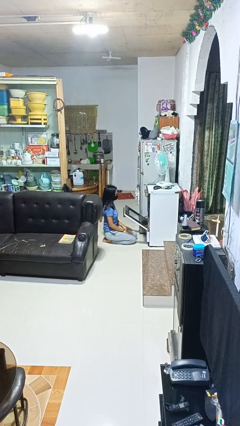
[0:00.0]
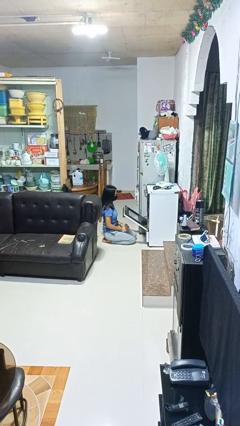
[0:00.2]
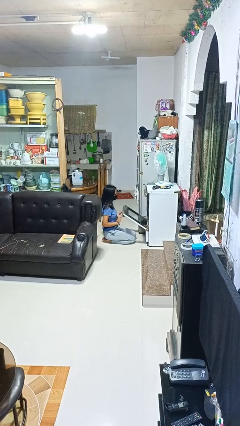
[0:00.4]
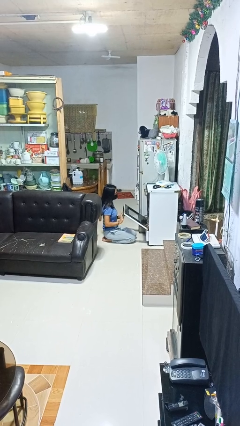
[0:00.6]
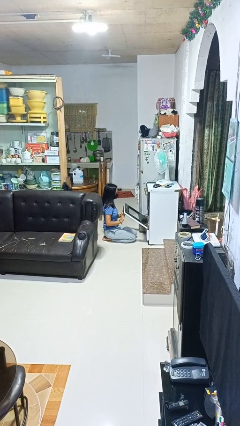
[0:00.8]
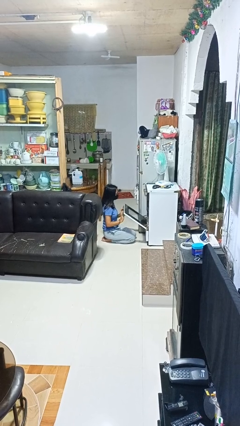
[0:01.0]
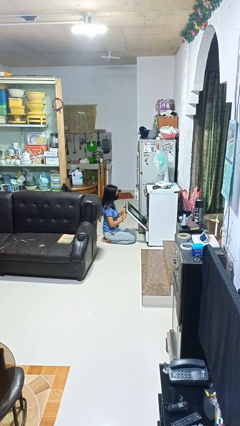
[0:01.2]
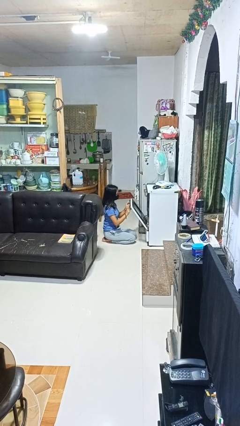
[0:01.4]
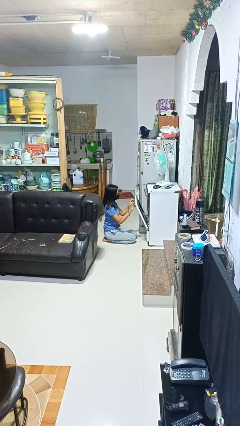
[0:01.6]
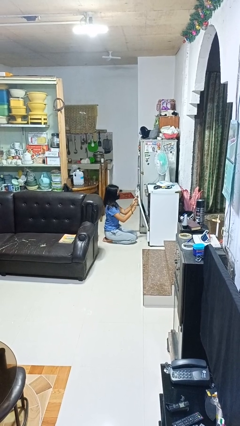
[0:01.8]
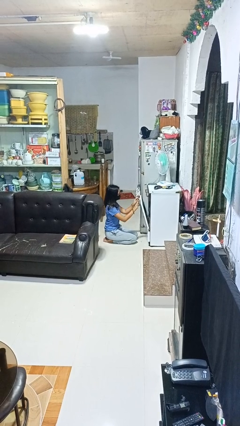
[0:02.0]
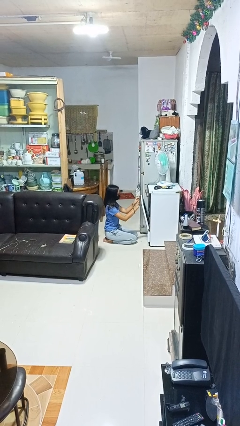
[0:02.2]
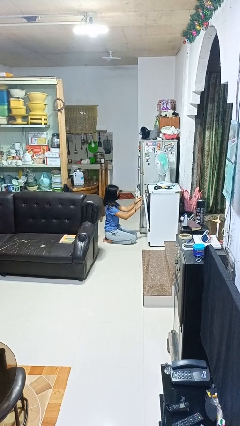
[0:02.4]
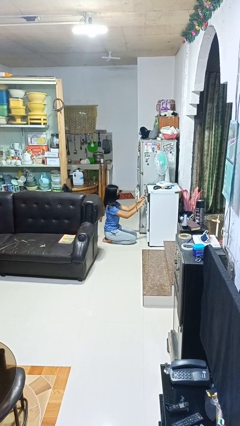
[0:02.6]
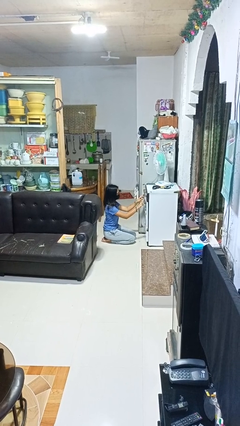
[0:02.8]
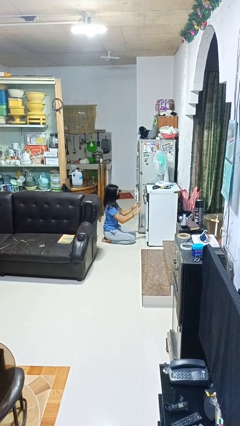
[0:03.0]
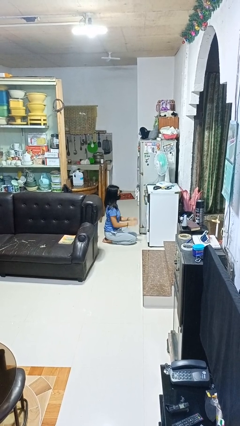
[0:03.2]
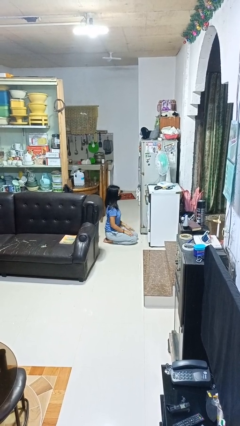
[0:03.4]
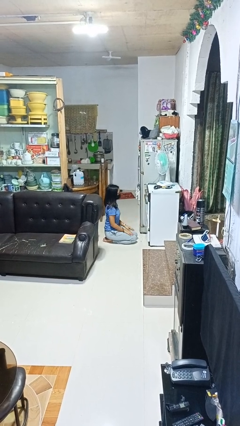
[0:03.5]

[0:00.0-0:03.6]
person closes oven door

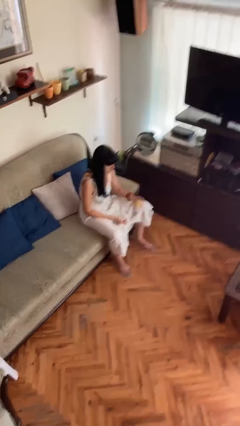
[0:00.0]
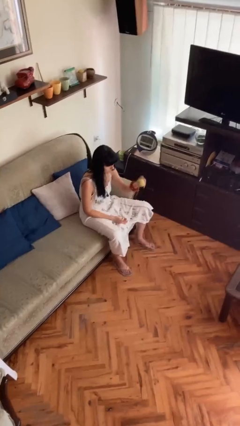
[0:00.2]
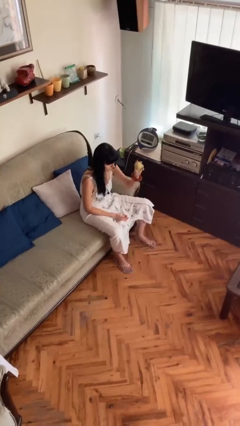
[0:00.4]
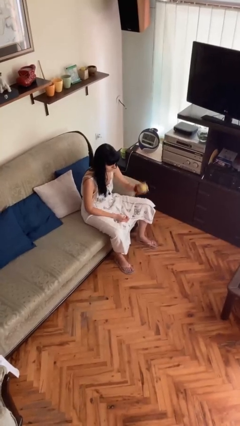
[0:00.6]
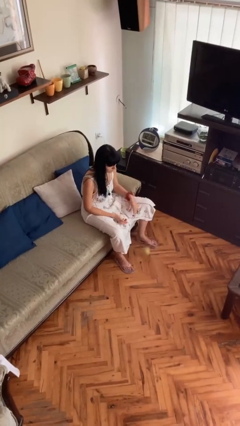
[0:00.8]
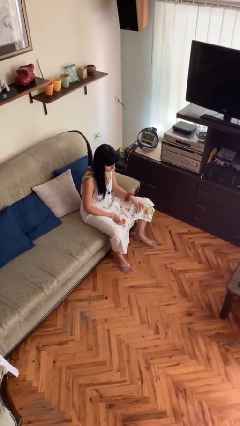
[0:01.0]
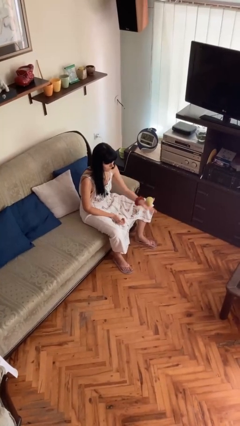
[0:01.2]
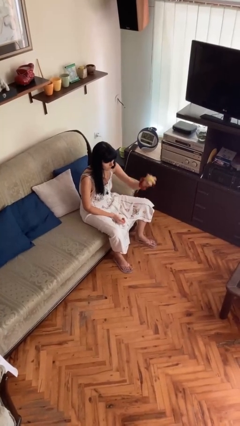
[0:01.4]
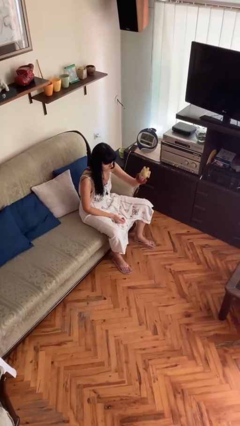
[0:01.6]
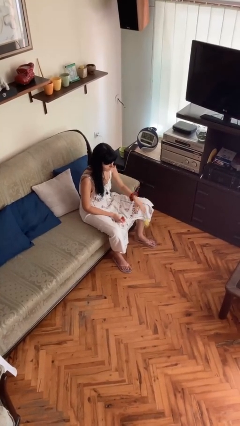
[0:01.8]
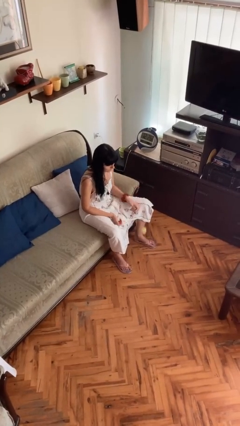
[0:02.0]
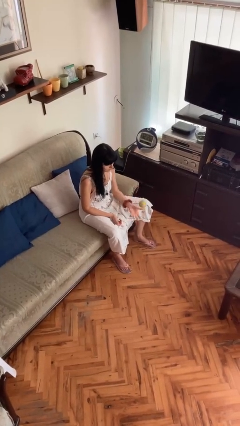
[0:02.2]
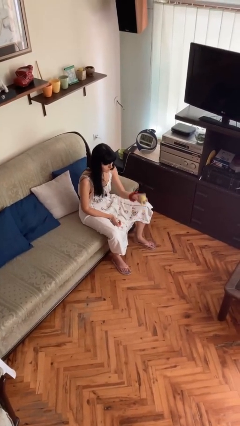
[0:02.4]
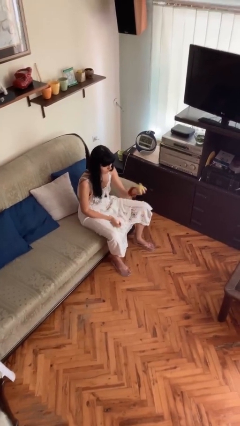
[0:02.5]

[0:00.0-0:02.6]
person bounces ball on floor

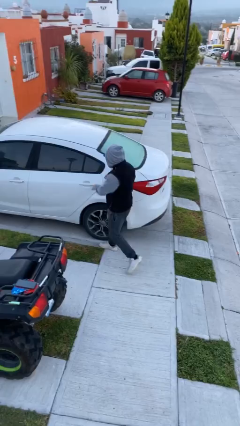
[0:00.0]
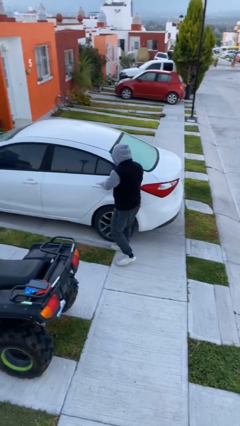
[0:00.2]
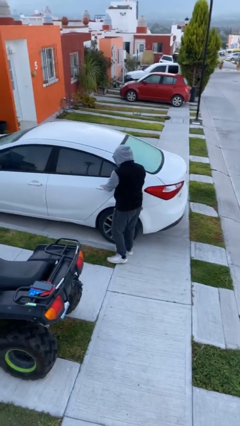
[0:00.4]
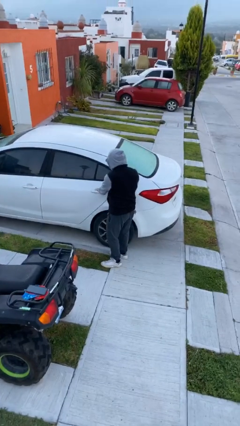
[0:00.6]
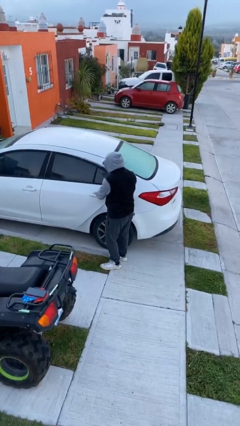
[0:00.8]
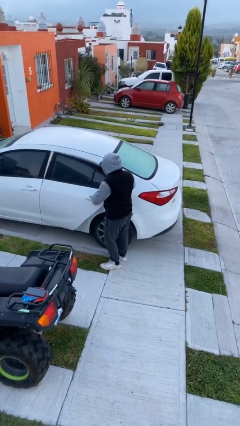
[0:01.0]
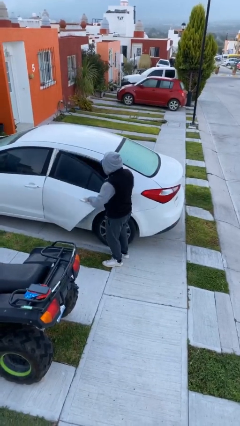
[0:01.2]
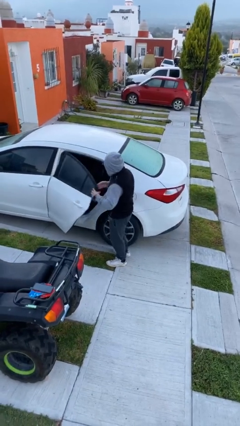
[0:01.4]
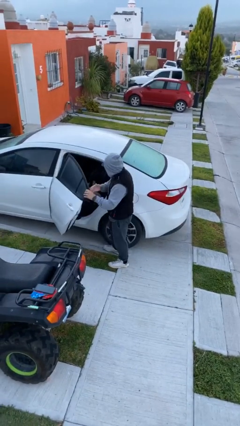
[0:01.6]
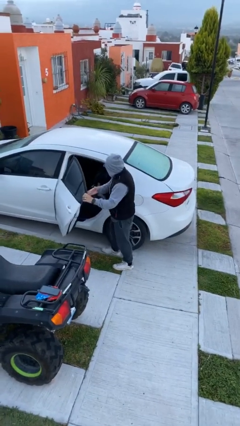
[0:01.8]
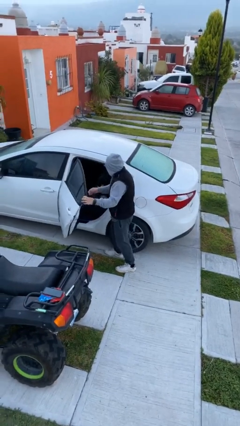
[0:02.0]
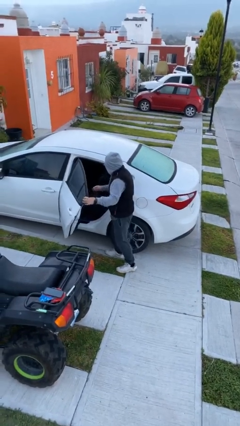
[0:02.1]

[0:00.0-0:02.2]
person opens car door

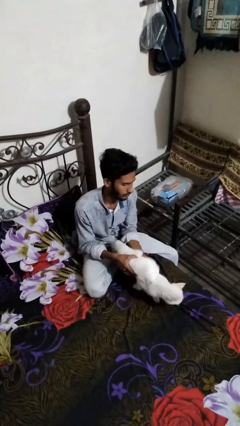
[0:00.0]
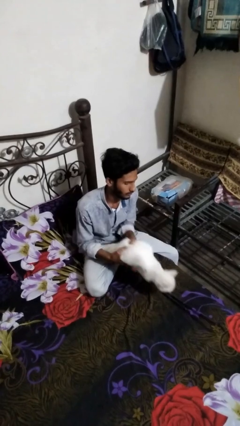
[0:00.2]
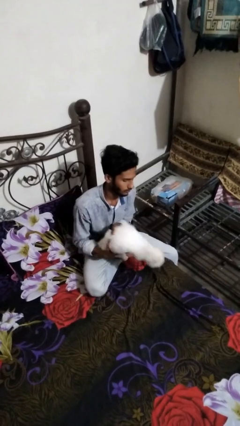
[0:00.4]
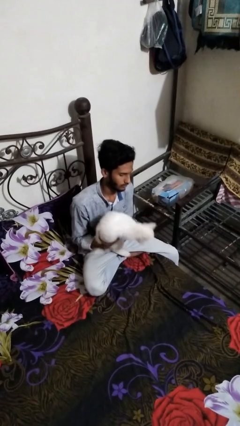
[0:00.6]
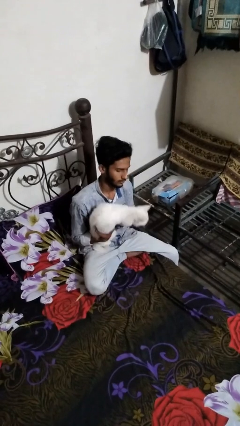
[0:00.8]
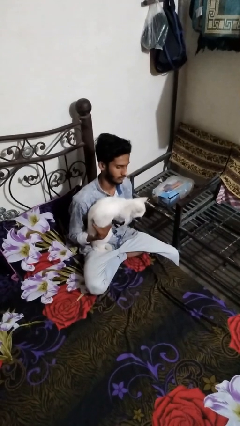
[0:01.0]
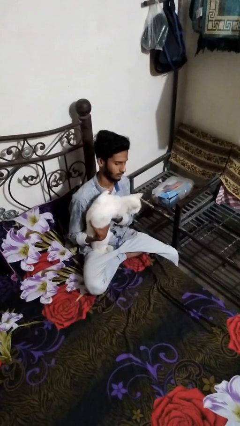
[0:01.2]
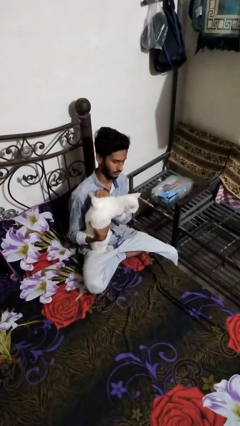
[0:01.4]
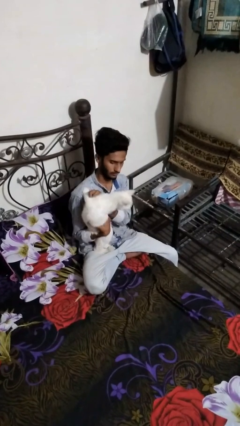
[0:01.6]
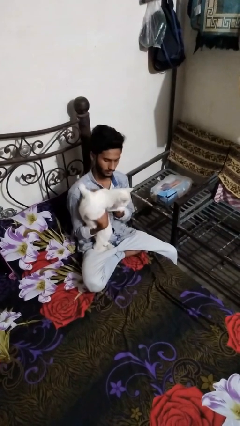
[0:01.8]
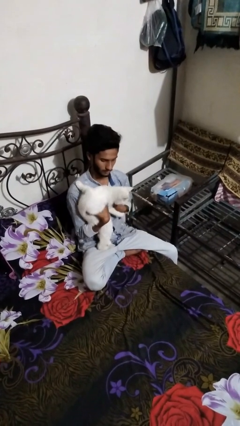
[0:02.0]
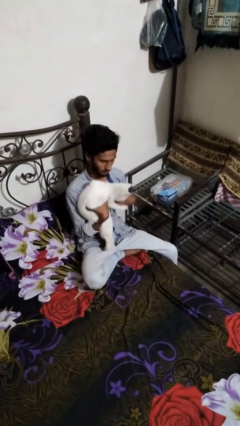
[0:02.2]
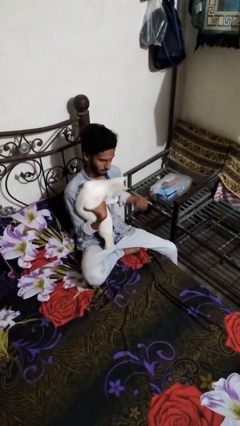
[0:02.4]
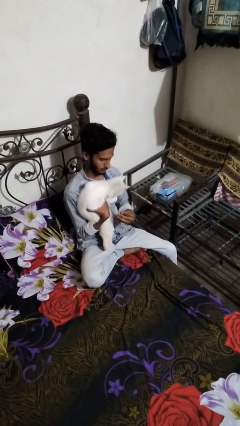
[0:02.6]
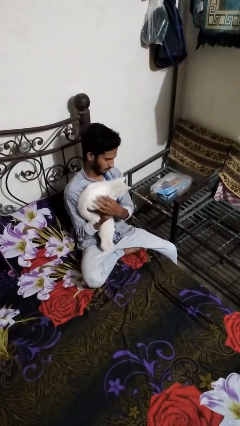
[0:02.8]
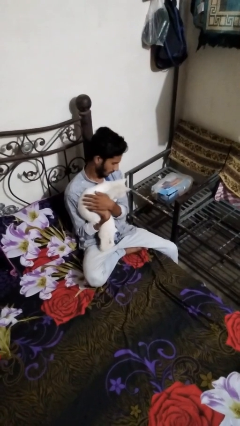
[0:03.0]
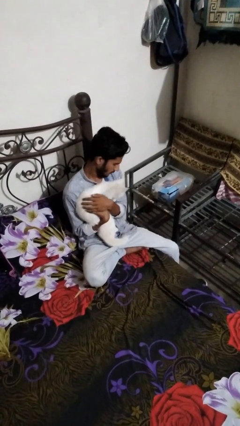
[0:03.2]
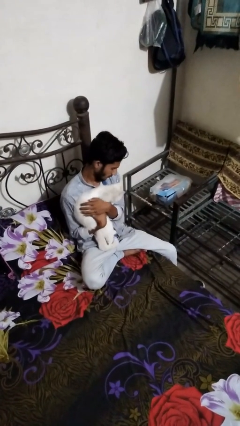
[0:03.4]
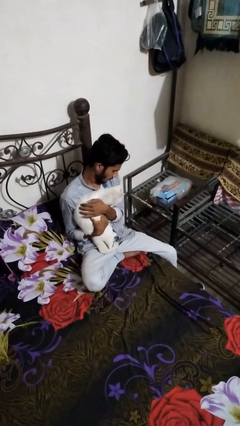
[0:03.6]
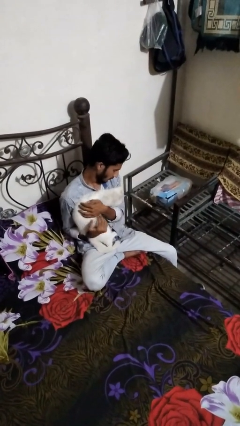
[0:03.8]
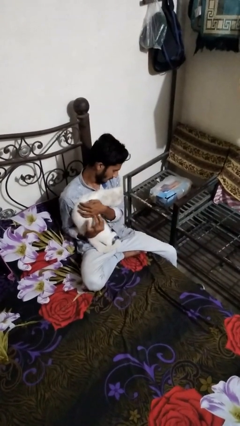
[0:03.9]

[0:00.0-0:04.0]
person hugs cat

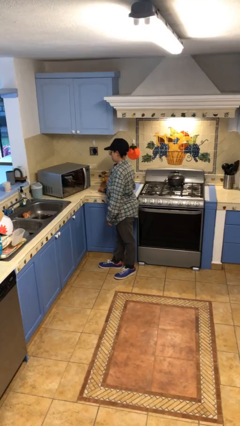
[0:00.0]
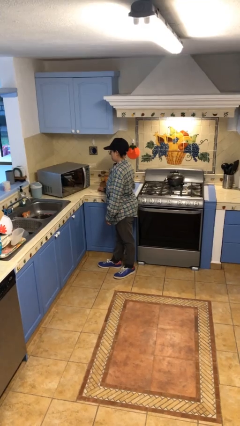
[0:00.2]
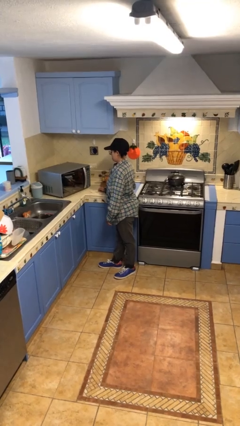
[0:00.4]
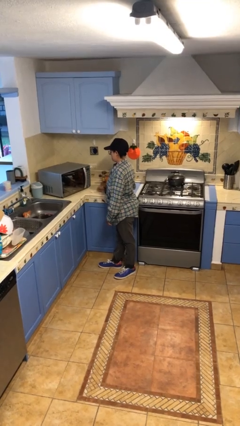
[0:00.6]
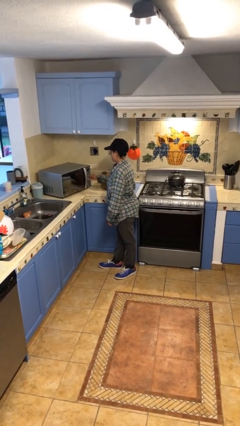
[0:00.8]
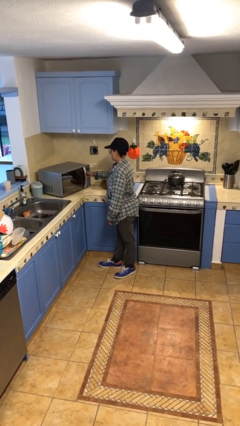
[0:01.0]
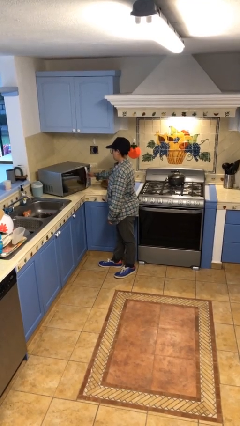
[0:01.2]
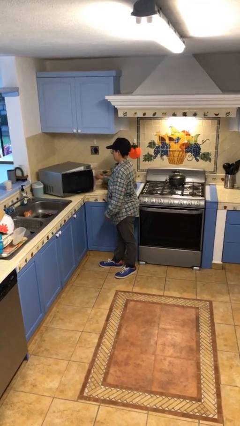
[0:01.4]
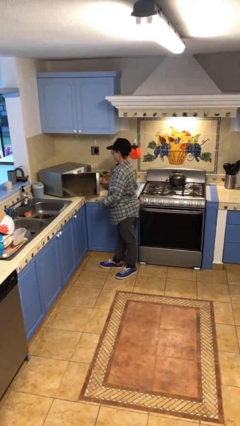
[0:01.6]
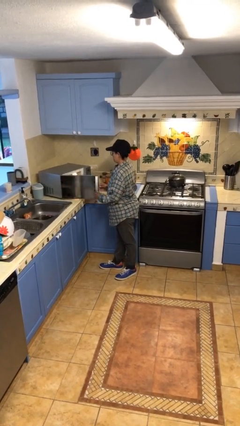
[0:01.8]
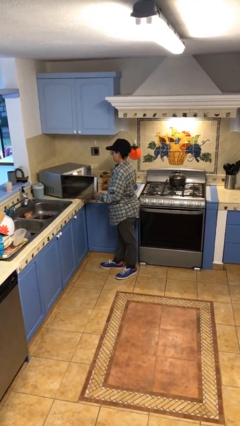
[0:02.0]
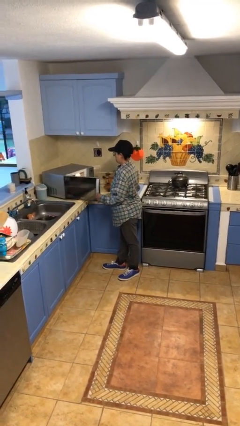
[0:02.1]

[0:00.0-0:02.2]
person opens microwave

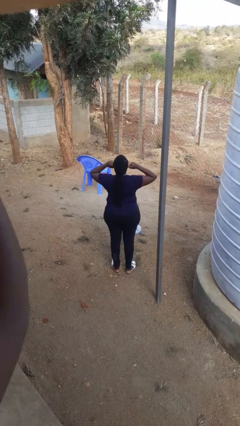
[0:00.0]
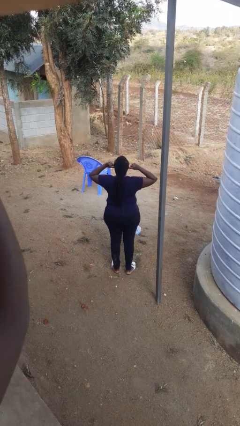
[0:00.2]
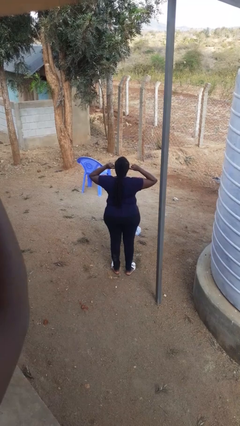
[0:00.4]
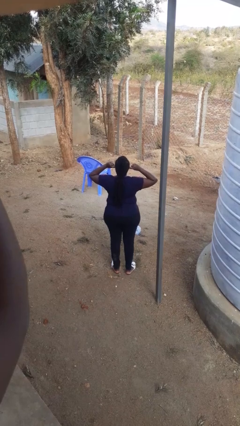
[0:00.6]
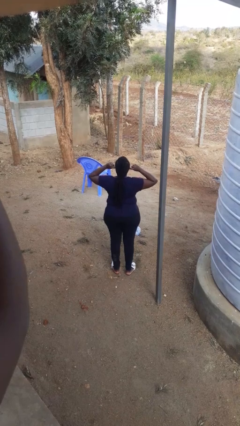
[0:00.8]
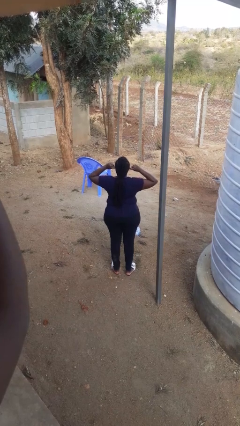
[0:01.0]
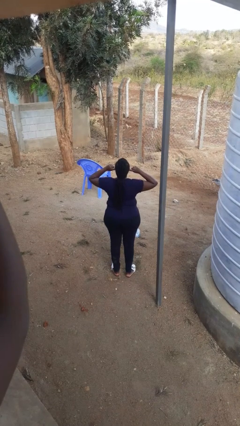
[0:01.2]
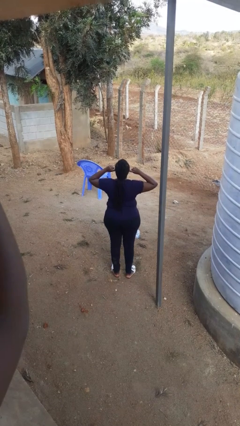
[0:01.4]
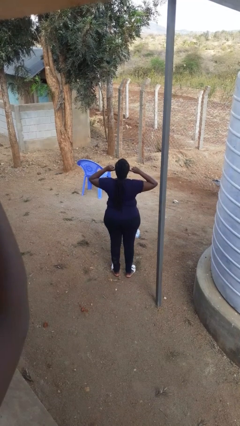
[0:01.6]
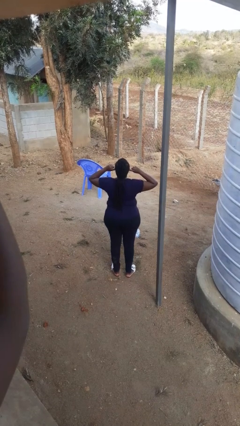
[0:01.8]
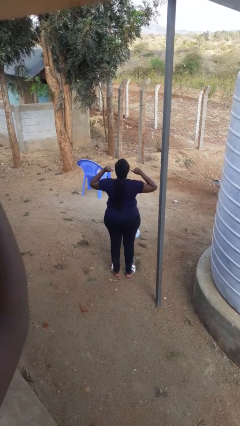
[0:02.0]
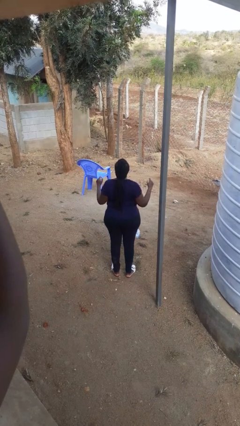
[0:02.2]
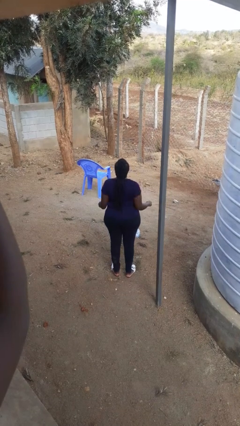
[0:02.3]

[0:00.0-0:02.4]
person puts fingers in ear

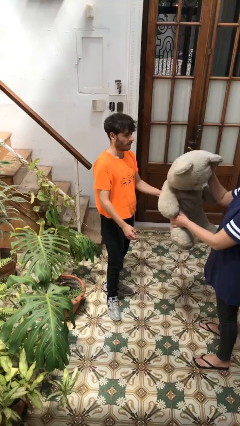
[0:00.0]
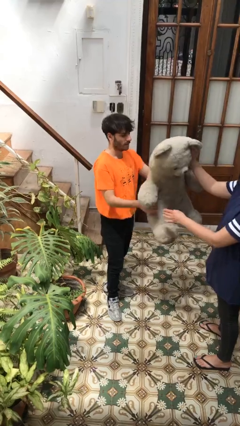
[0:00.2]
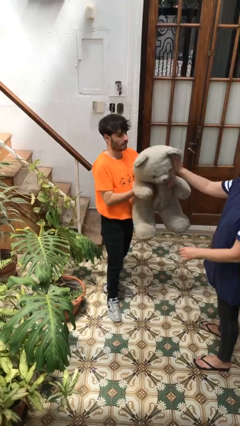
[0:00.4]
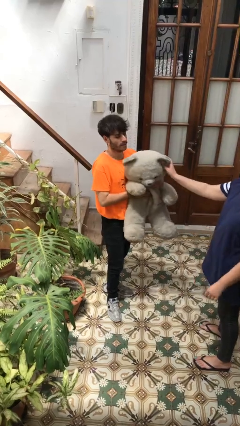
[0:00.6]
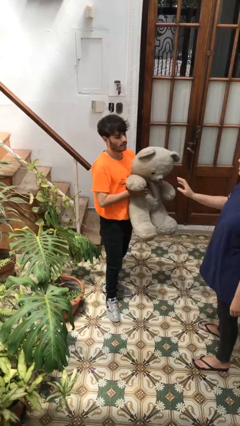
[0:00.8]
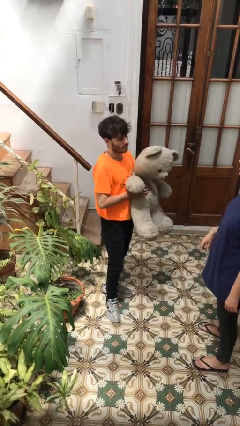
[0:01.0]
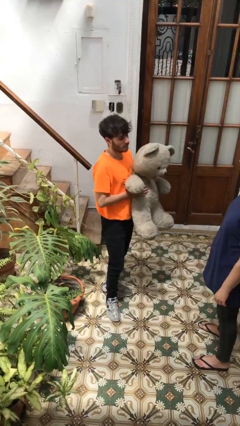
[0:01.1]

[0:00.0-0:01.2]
person transfers object to person
